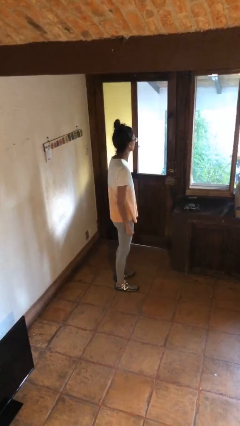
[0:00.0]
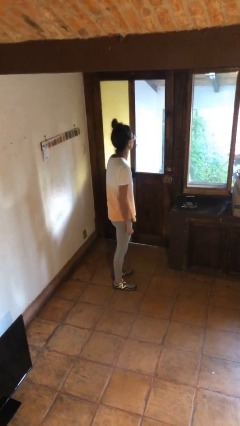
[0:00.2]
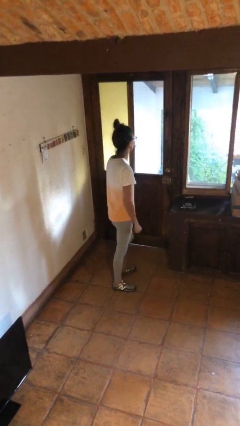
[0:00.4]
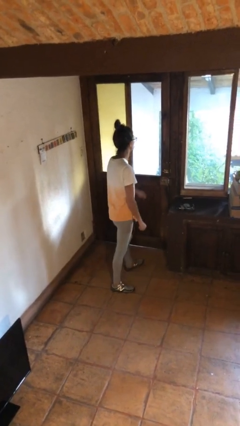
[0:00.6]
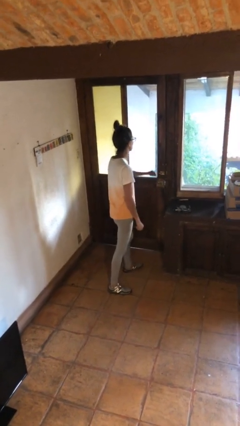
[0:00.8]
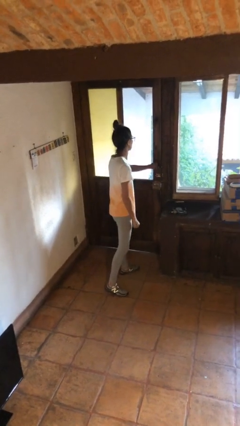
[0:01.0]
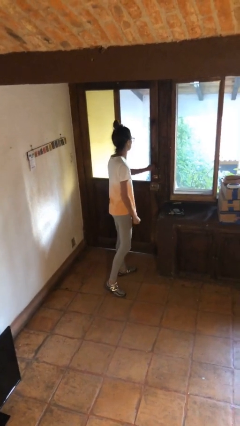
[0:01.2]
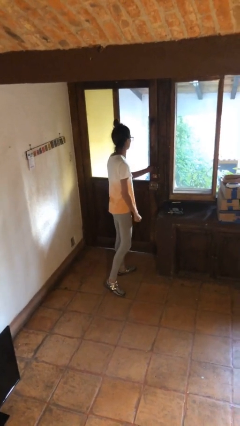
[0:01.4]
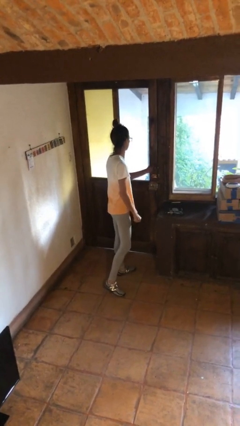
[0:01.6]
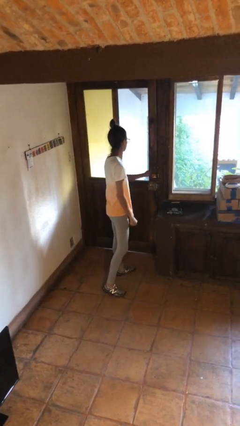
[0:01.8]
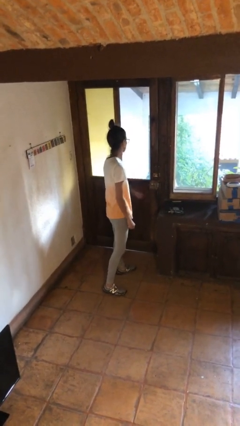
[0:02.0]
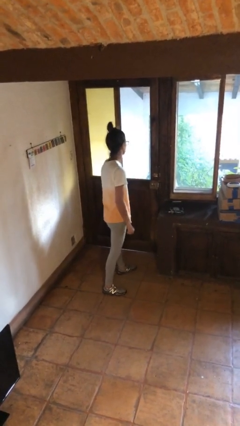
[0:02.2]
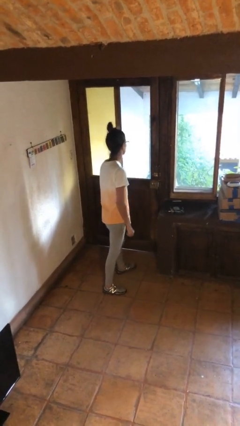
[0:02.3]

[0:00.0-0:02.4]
person unlocks door with keys

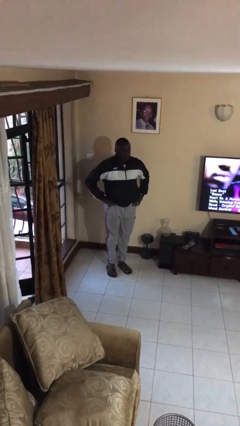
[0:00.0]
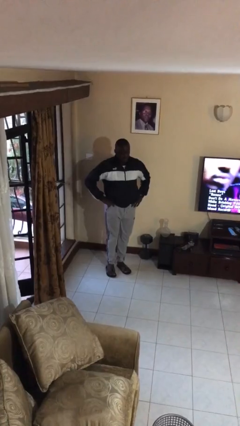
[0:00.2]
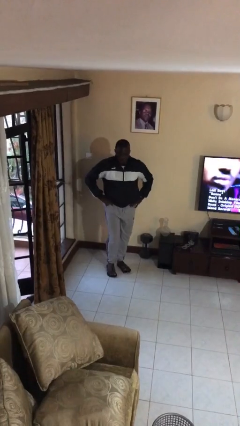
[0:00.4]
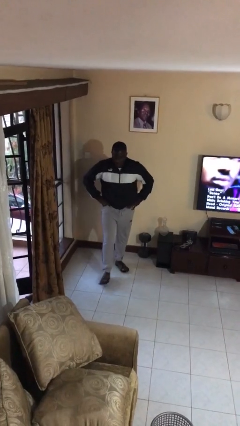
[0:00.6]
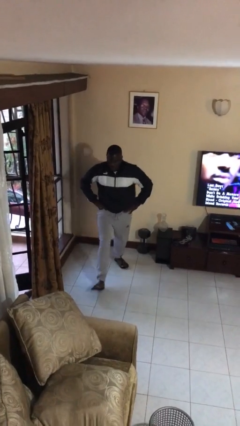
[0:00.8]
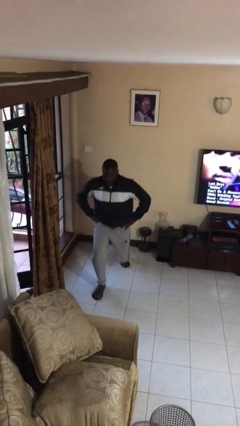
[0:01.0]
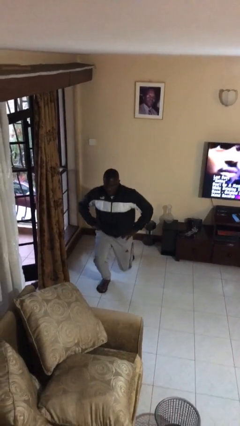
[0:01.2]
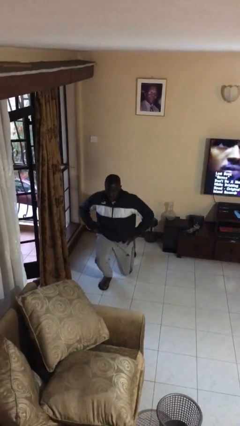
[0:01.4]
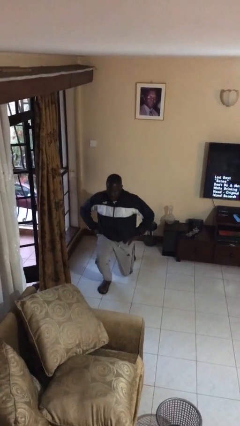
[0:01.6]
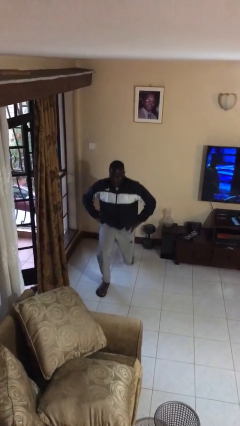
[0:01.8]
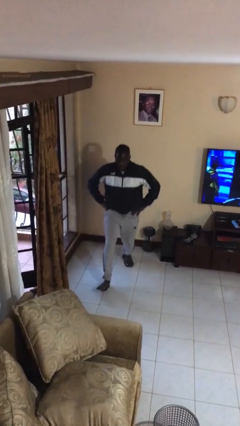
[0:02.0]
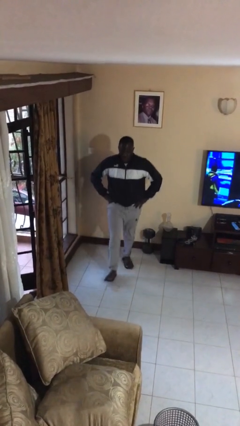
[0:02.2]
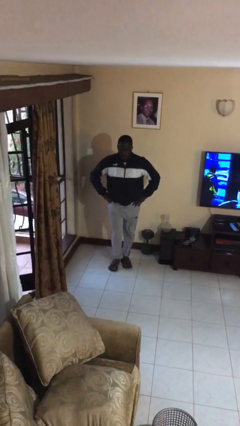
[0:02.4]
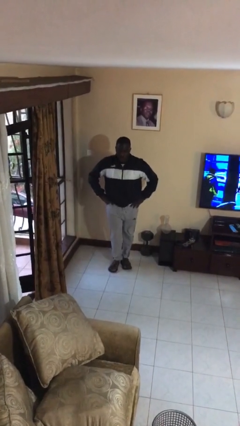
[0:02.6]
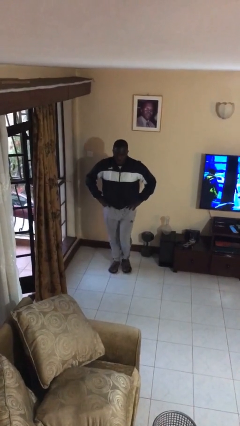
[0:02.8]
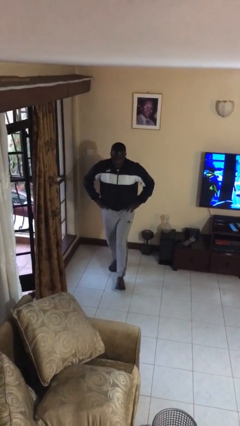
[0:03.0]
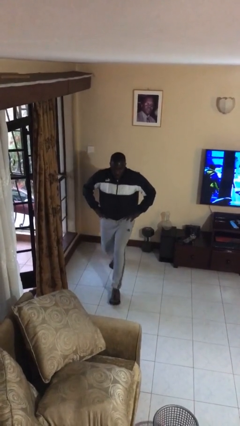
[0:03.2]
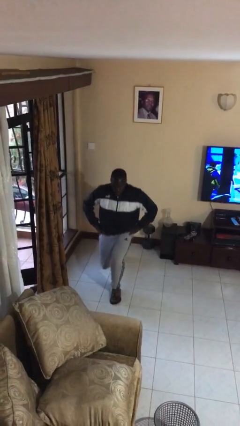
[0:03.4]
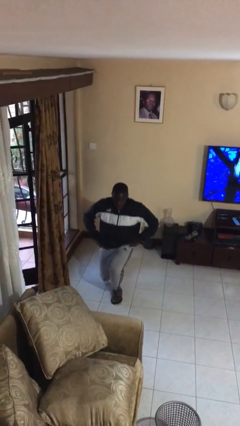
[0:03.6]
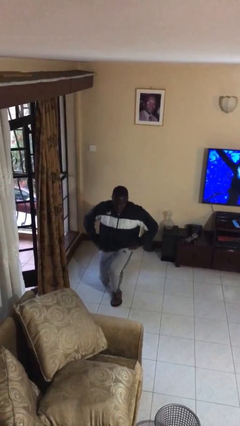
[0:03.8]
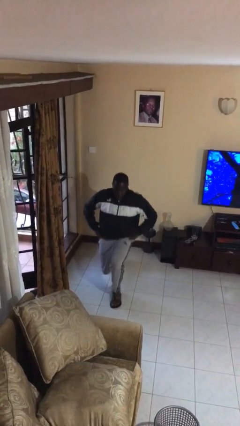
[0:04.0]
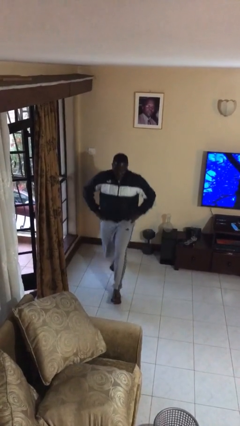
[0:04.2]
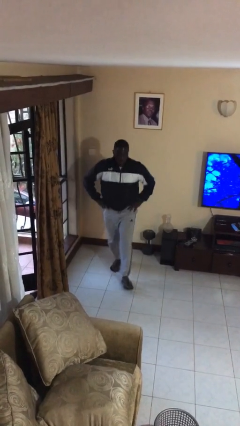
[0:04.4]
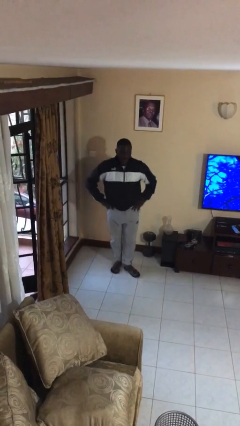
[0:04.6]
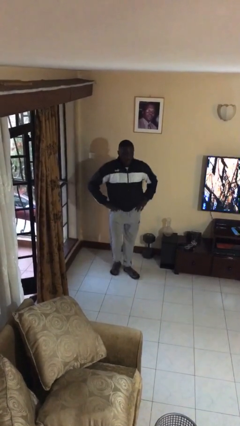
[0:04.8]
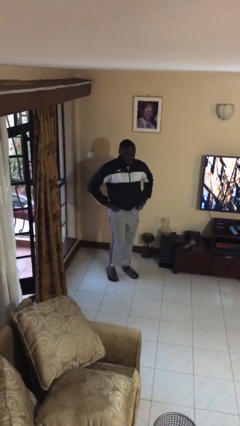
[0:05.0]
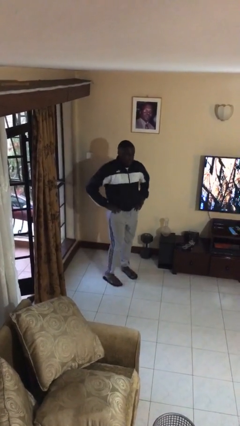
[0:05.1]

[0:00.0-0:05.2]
person exercises with lunges

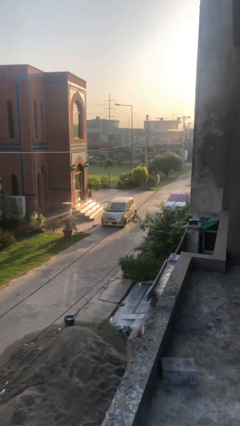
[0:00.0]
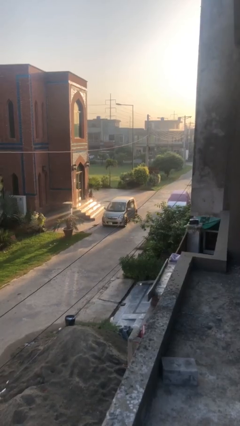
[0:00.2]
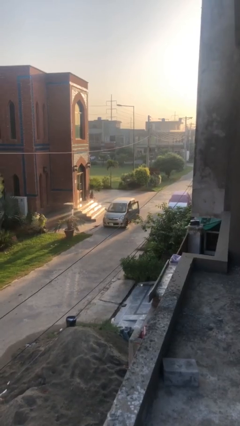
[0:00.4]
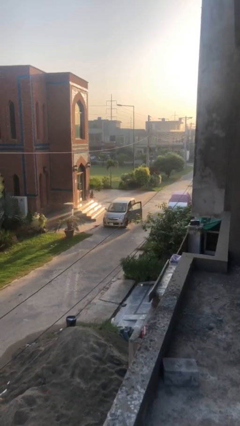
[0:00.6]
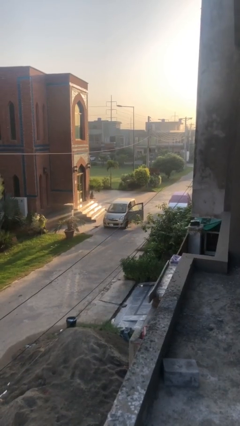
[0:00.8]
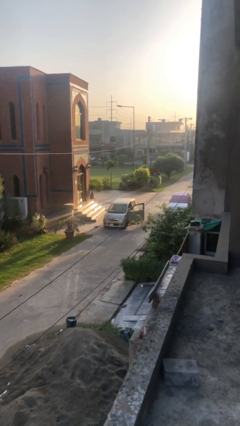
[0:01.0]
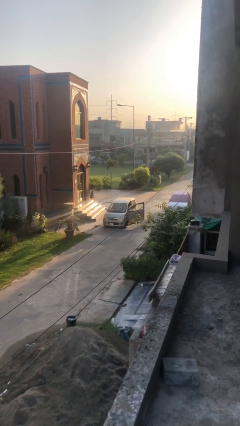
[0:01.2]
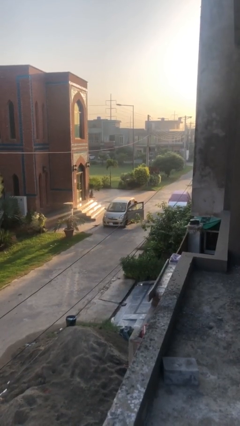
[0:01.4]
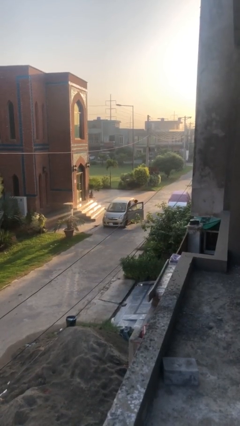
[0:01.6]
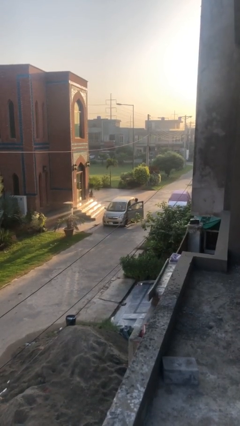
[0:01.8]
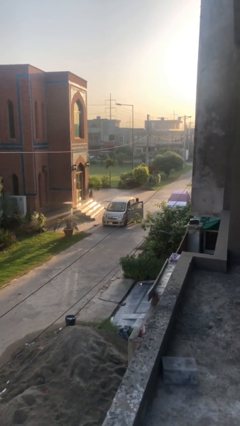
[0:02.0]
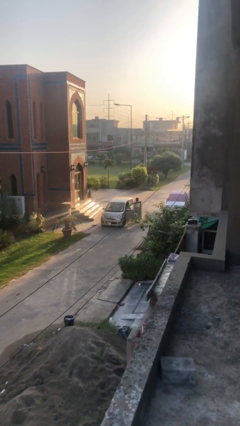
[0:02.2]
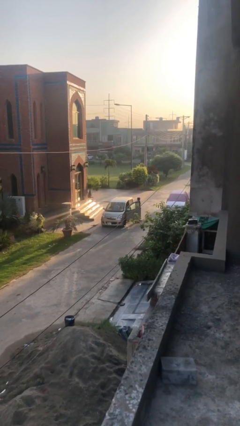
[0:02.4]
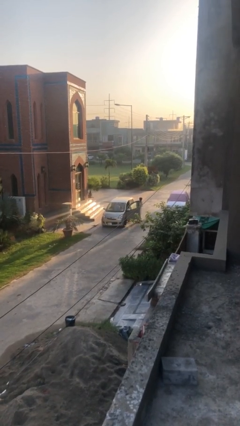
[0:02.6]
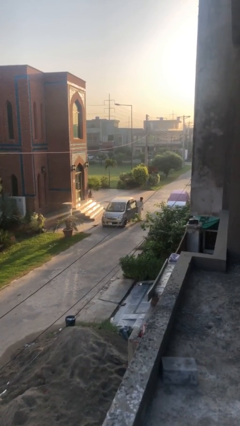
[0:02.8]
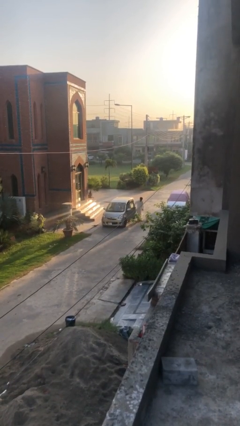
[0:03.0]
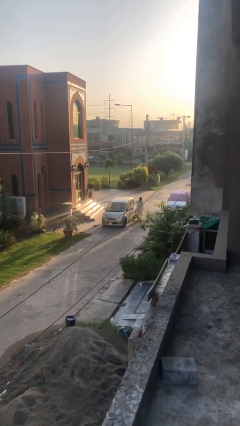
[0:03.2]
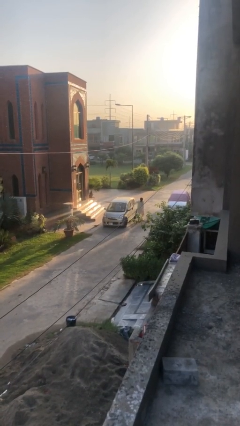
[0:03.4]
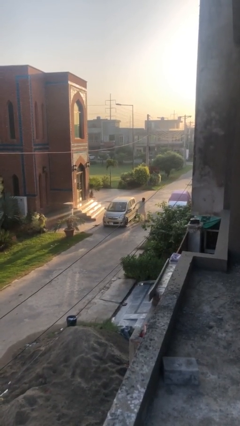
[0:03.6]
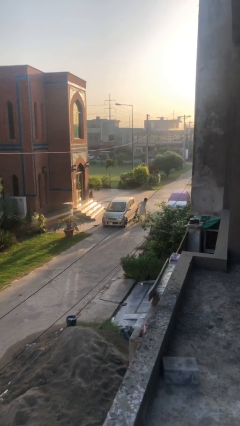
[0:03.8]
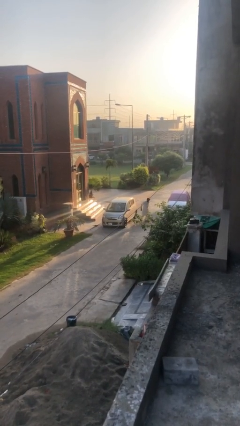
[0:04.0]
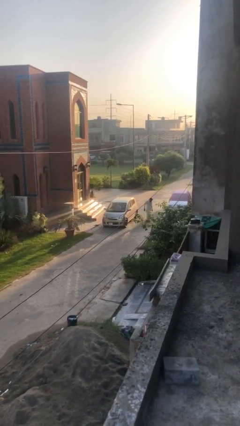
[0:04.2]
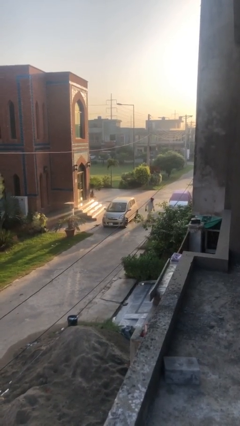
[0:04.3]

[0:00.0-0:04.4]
car drops off person

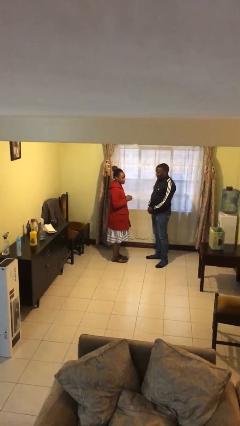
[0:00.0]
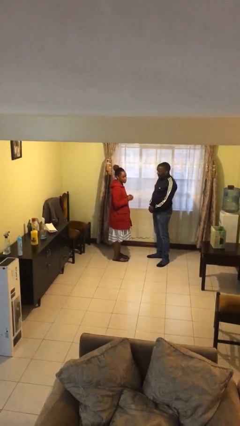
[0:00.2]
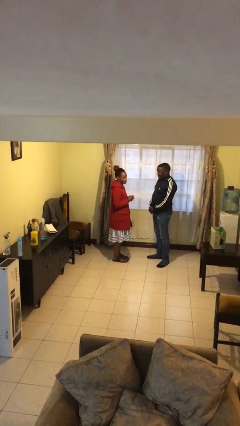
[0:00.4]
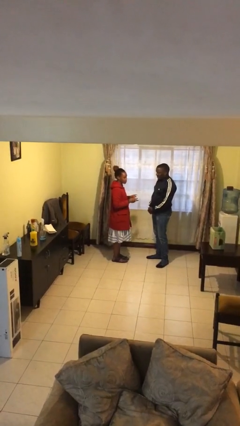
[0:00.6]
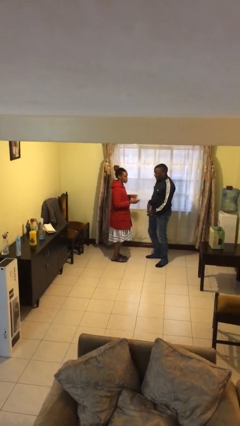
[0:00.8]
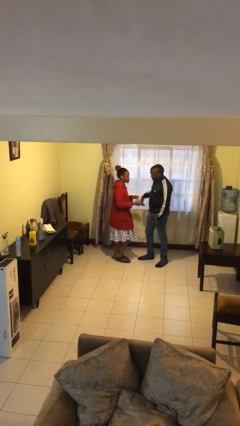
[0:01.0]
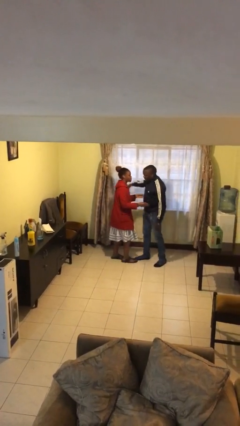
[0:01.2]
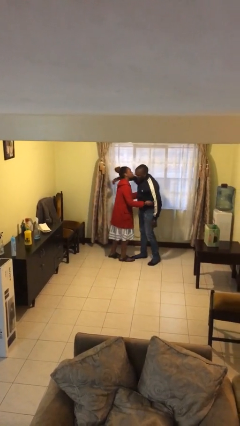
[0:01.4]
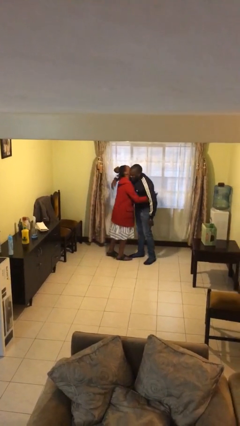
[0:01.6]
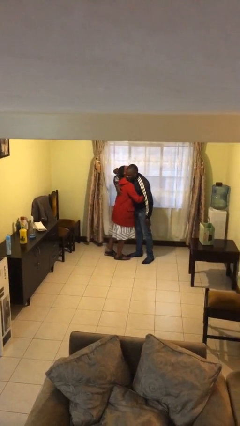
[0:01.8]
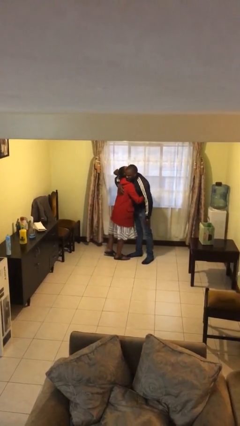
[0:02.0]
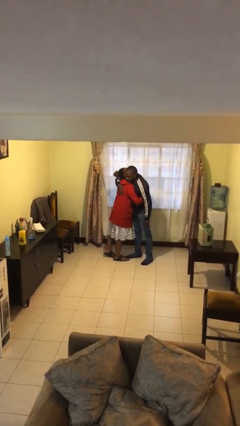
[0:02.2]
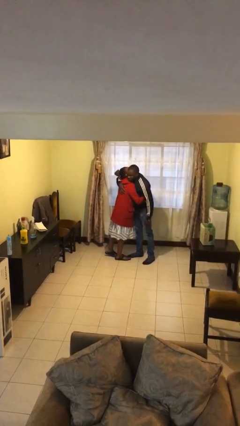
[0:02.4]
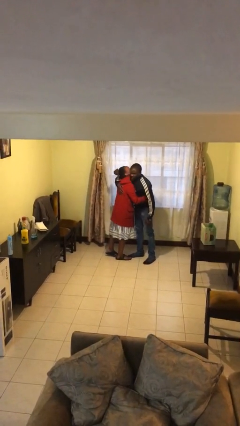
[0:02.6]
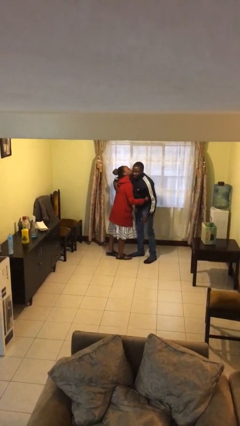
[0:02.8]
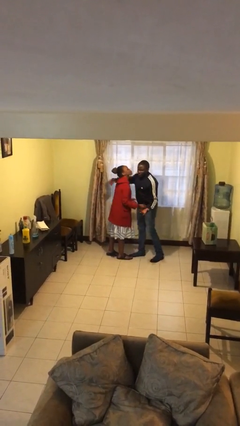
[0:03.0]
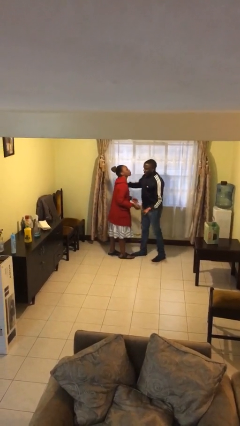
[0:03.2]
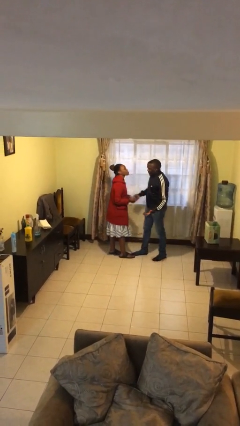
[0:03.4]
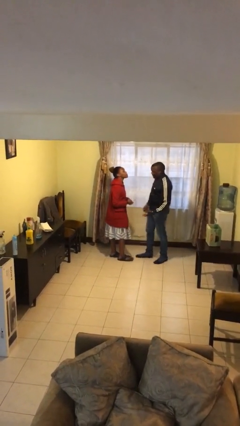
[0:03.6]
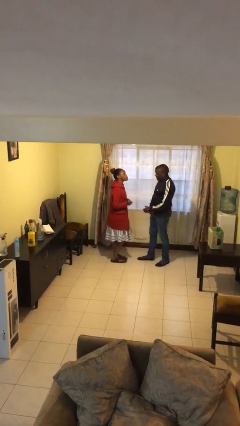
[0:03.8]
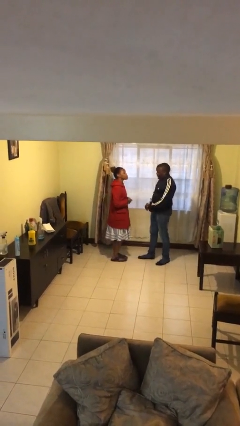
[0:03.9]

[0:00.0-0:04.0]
person embraces person

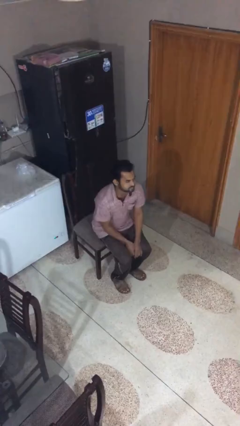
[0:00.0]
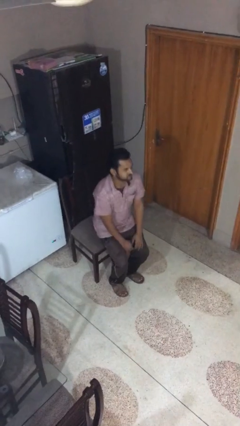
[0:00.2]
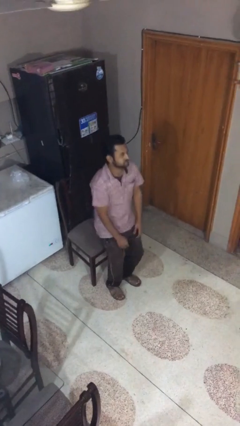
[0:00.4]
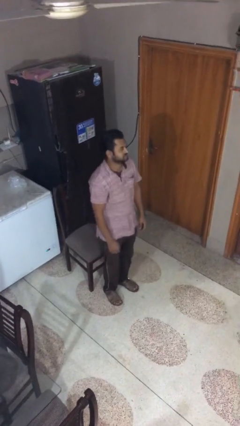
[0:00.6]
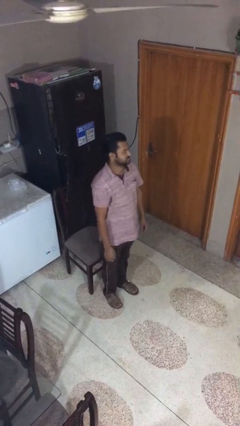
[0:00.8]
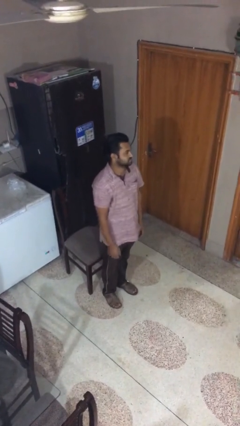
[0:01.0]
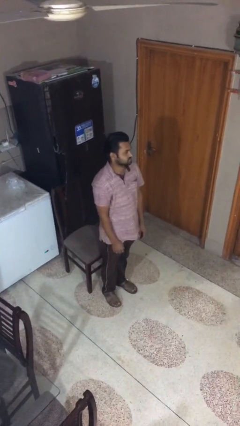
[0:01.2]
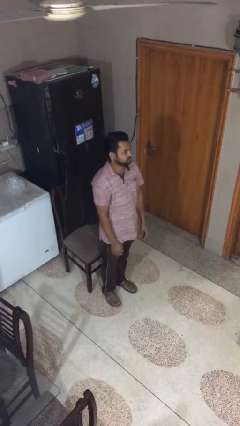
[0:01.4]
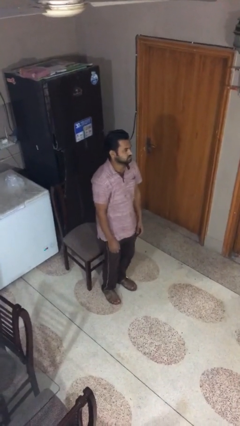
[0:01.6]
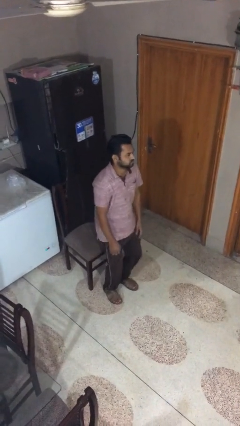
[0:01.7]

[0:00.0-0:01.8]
person stands up
